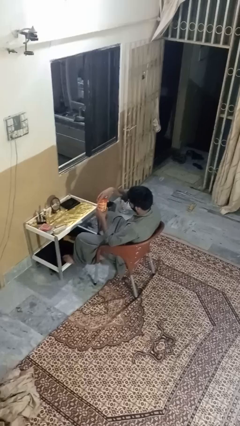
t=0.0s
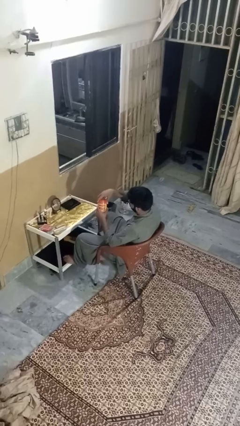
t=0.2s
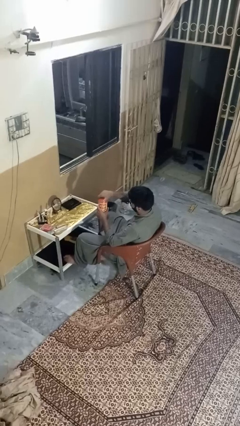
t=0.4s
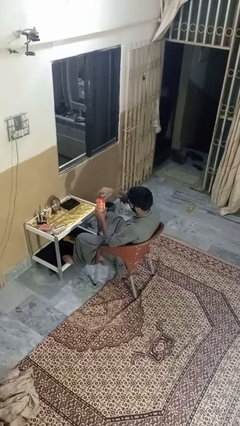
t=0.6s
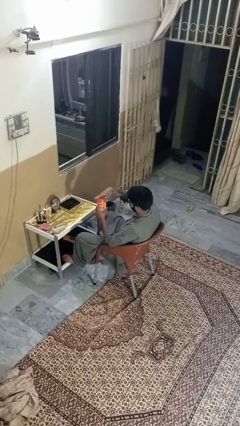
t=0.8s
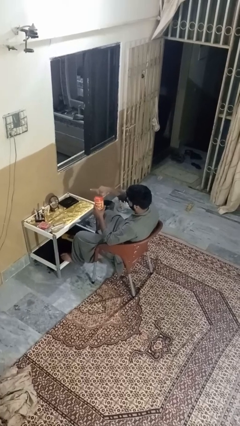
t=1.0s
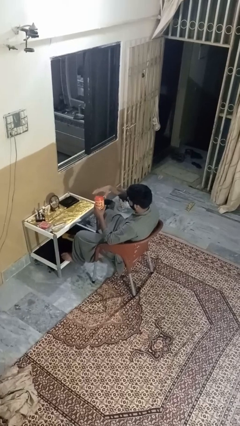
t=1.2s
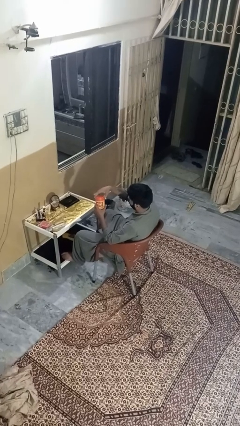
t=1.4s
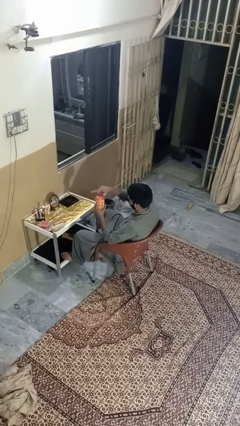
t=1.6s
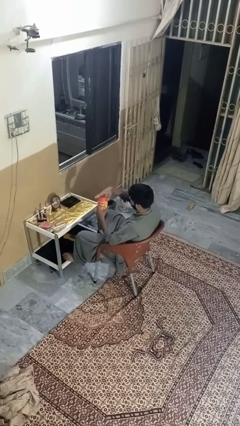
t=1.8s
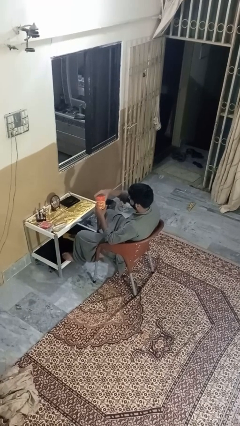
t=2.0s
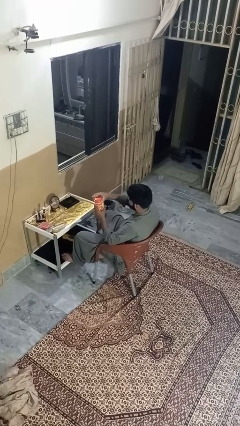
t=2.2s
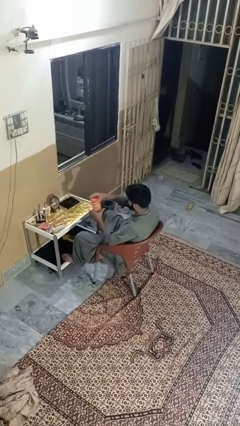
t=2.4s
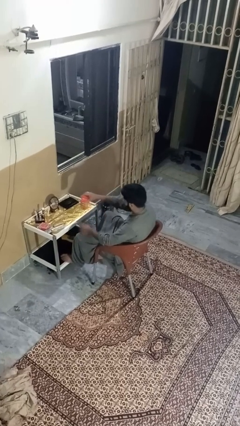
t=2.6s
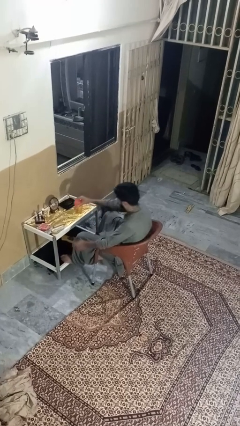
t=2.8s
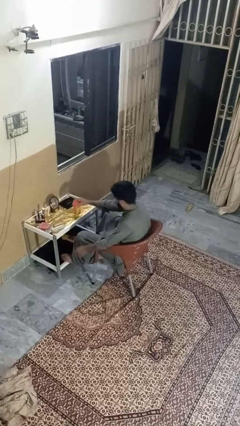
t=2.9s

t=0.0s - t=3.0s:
person closes jar

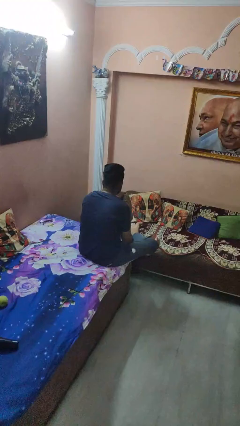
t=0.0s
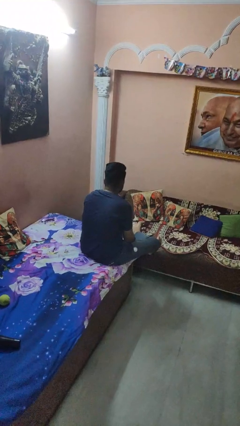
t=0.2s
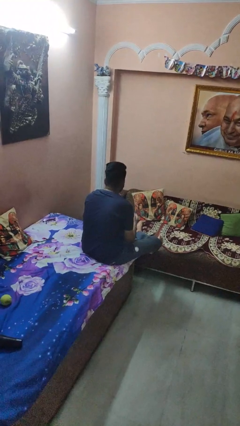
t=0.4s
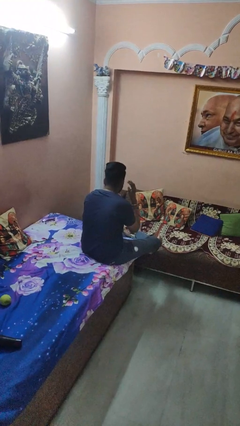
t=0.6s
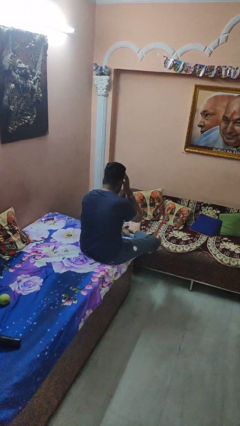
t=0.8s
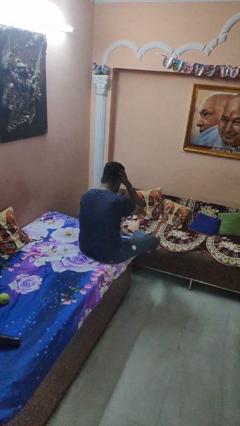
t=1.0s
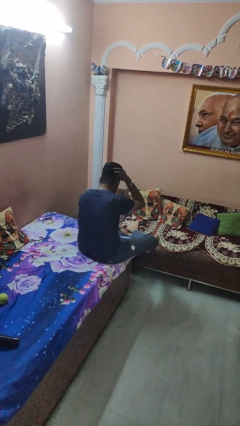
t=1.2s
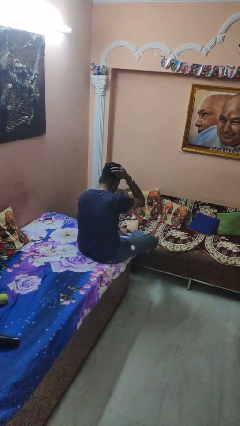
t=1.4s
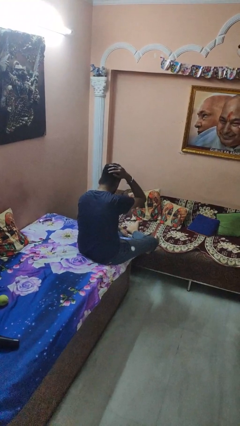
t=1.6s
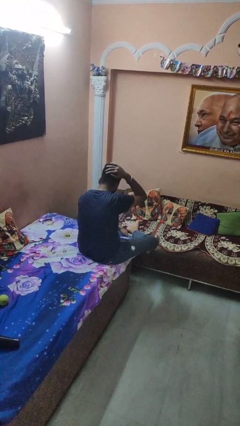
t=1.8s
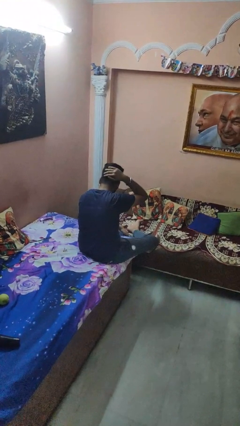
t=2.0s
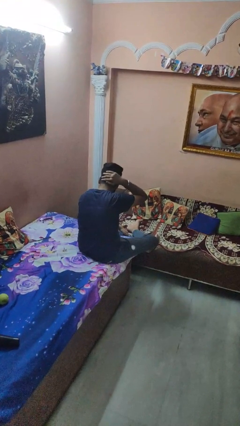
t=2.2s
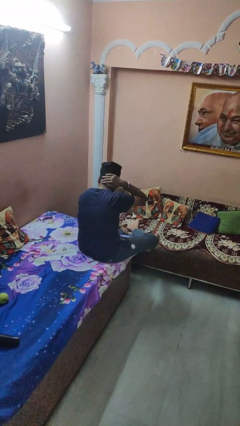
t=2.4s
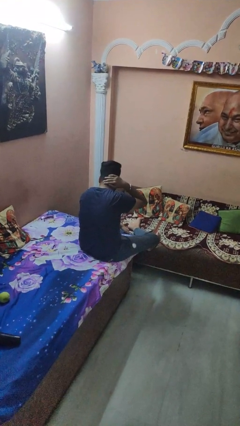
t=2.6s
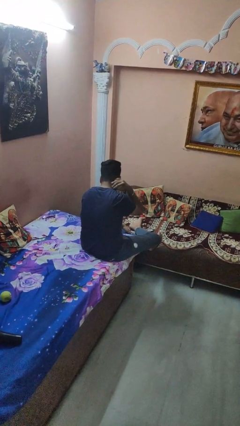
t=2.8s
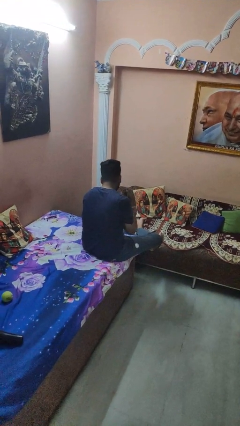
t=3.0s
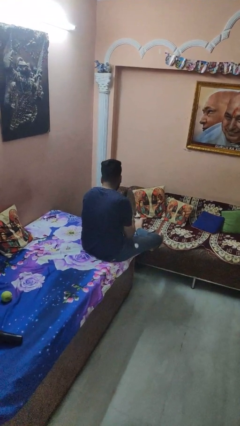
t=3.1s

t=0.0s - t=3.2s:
person strokes hair

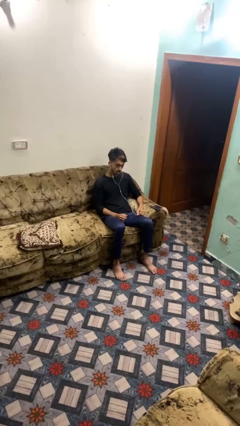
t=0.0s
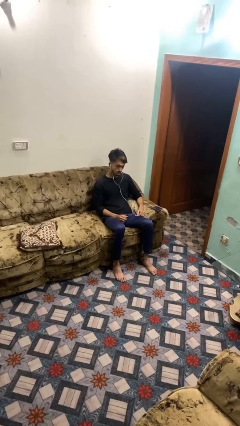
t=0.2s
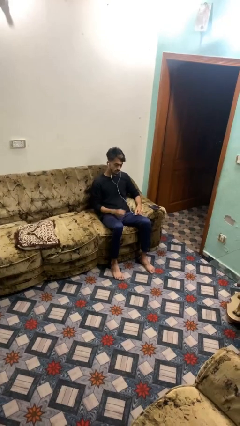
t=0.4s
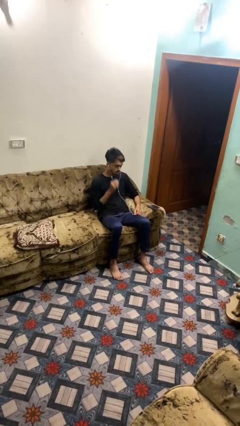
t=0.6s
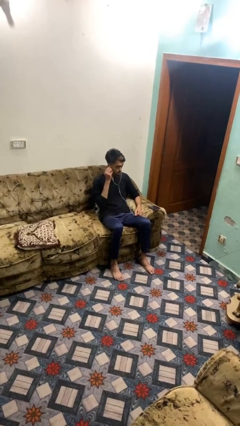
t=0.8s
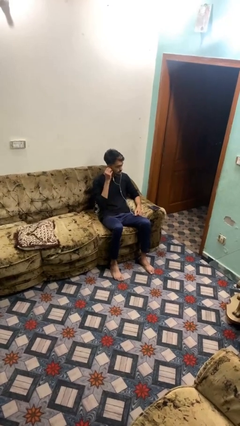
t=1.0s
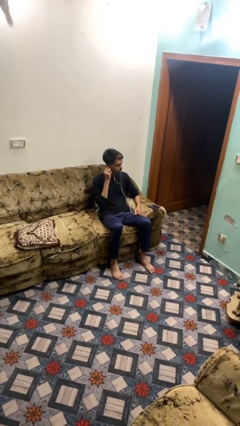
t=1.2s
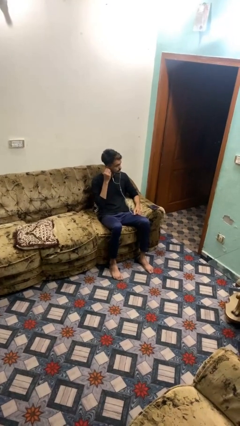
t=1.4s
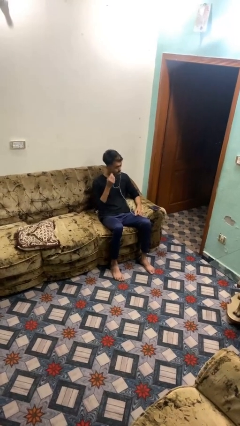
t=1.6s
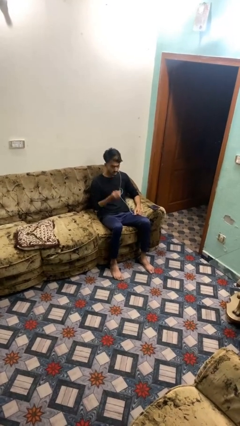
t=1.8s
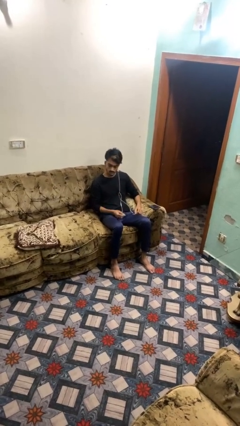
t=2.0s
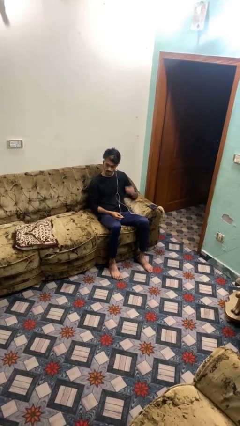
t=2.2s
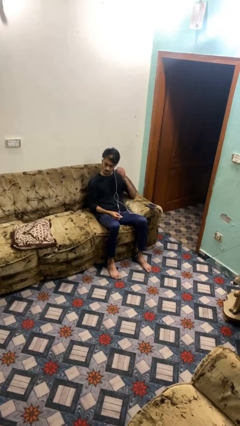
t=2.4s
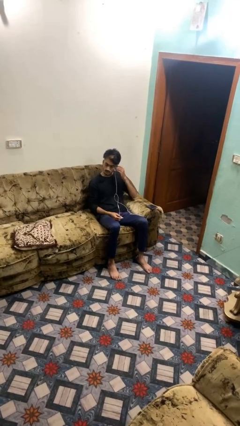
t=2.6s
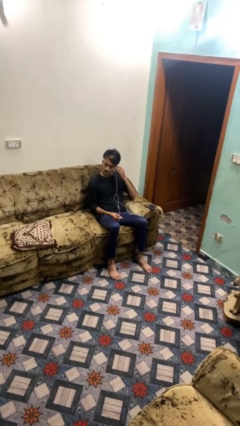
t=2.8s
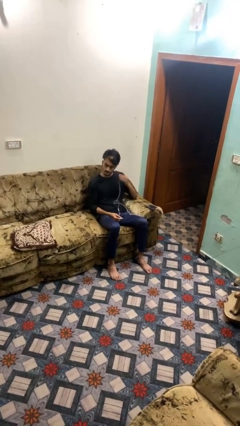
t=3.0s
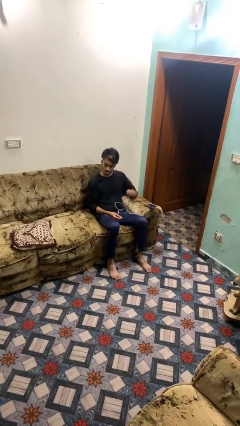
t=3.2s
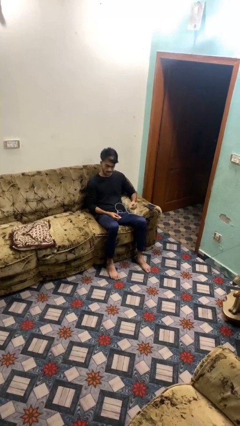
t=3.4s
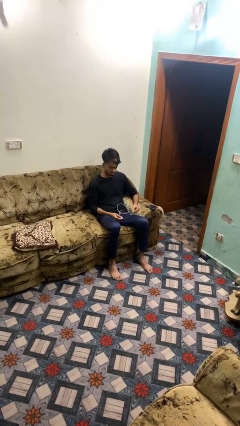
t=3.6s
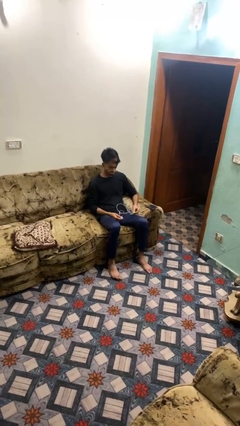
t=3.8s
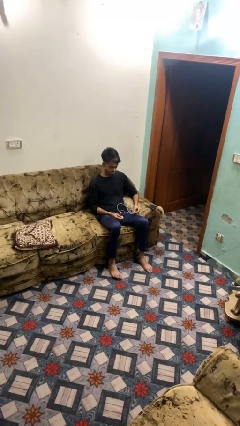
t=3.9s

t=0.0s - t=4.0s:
person takes off headphones

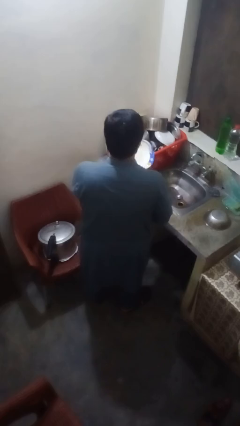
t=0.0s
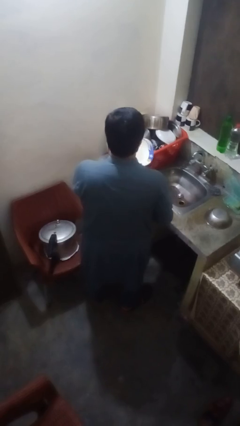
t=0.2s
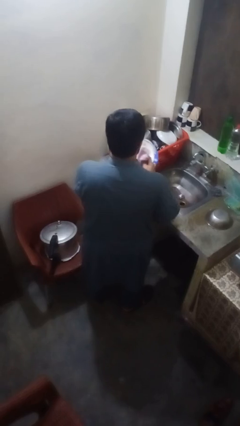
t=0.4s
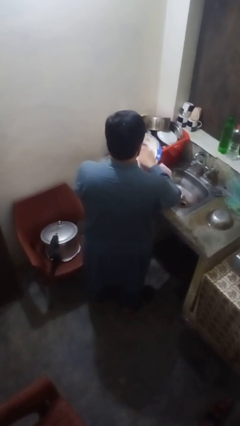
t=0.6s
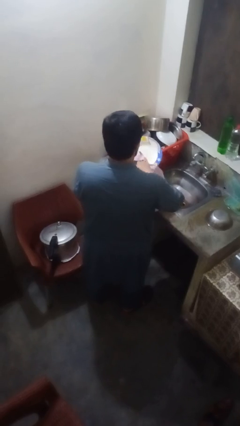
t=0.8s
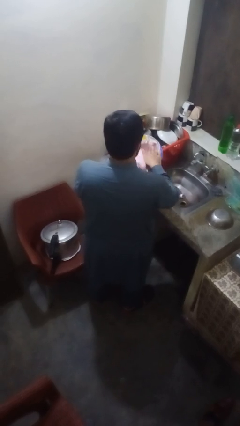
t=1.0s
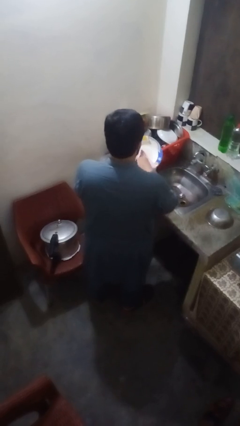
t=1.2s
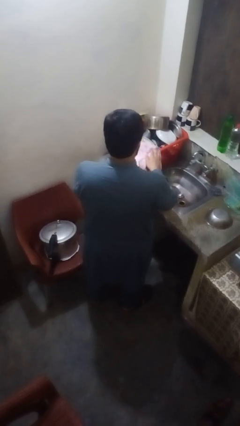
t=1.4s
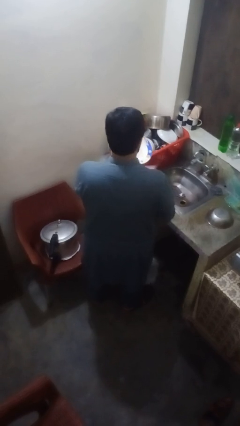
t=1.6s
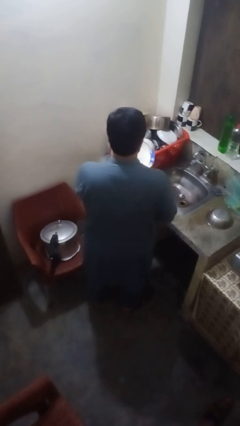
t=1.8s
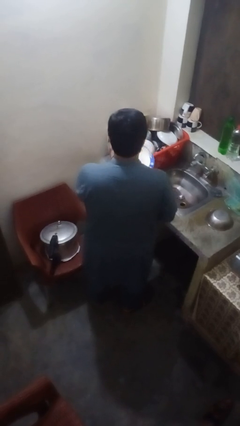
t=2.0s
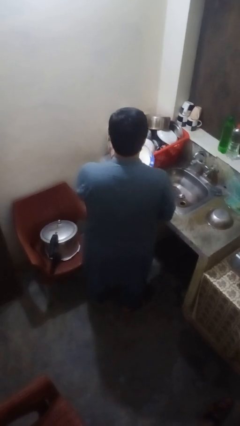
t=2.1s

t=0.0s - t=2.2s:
person dries dish

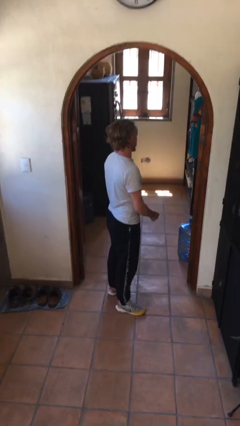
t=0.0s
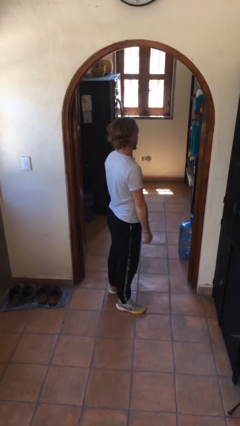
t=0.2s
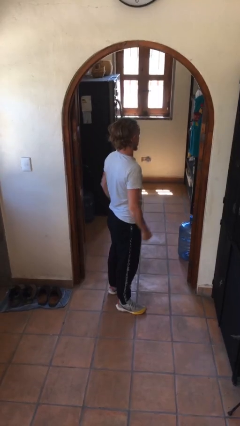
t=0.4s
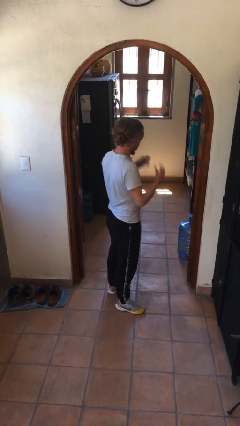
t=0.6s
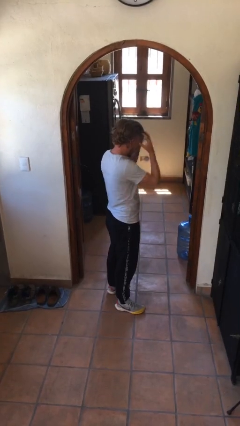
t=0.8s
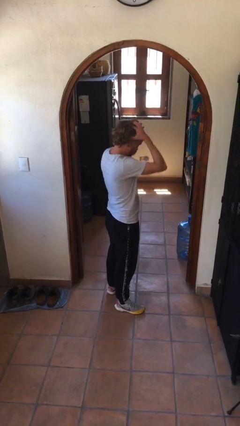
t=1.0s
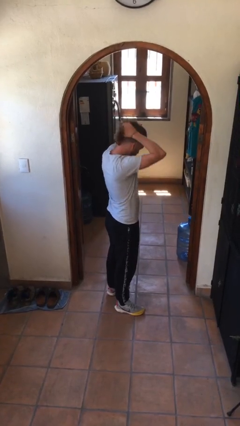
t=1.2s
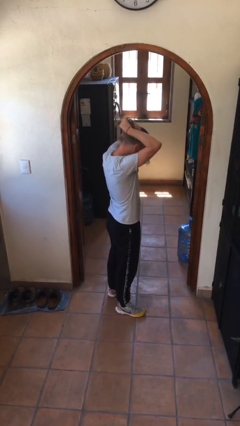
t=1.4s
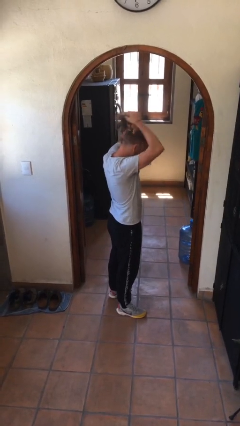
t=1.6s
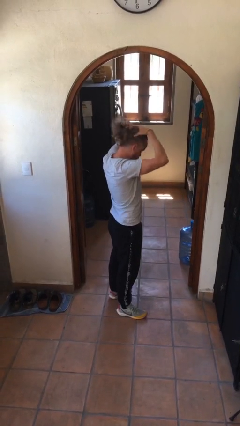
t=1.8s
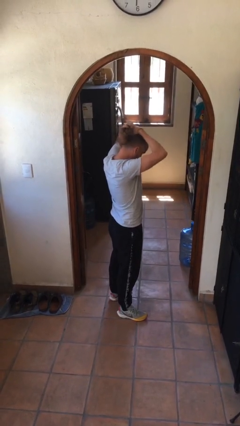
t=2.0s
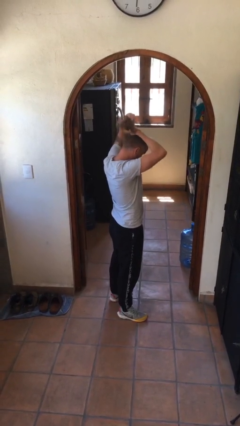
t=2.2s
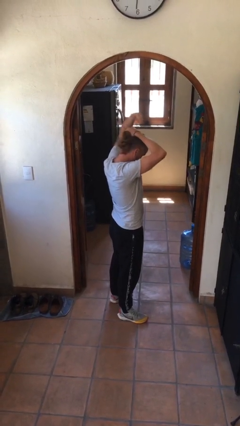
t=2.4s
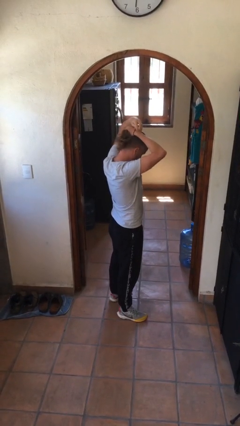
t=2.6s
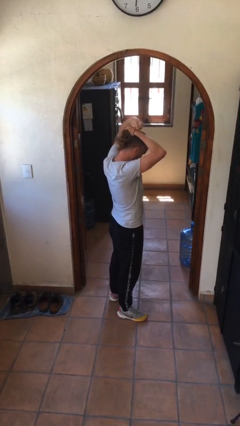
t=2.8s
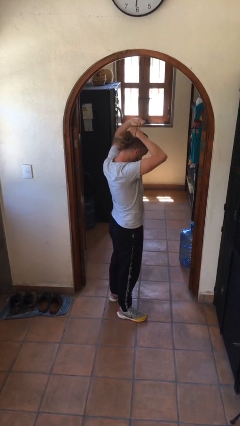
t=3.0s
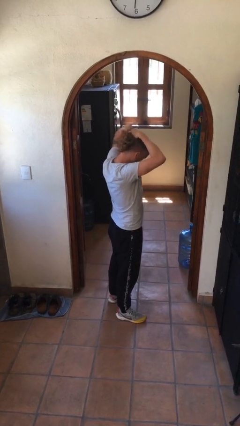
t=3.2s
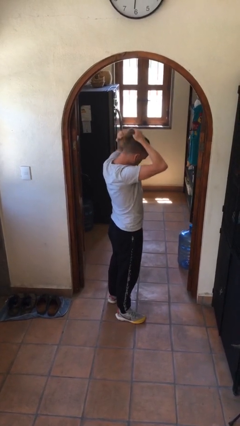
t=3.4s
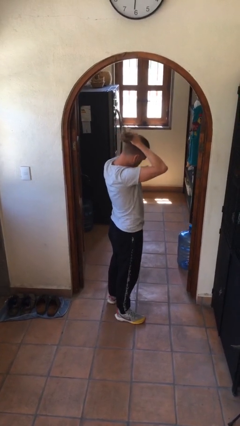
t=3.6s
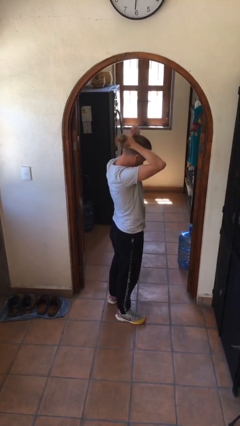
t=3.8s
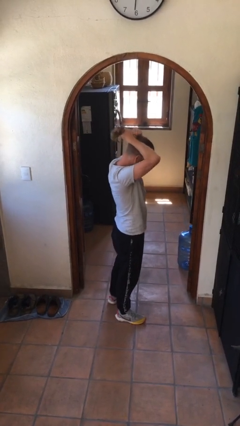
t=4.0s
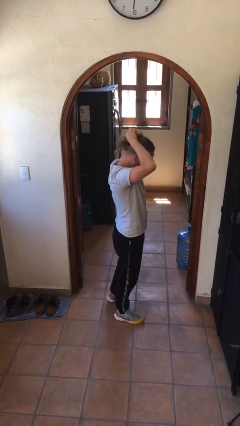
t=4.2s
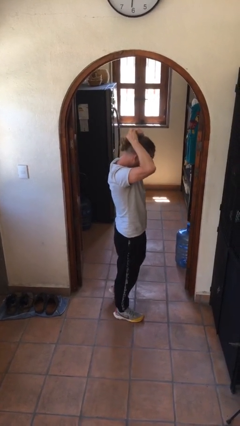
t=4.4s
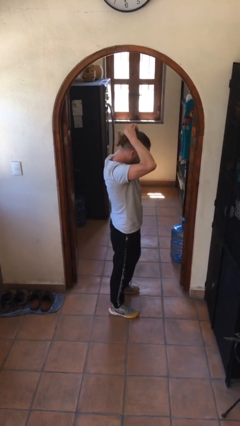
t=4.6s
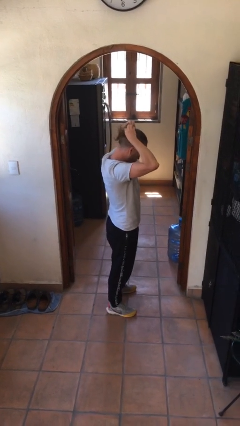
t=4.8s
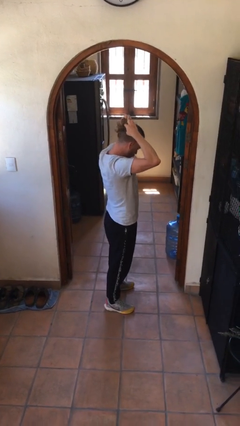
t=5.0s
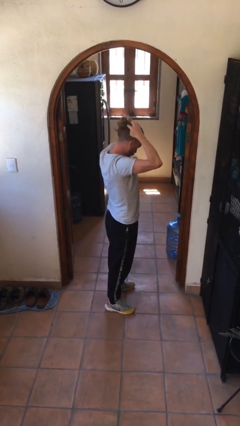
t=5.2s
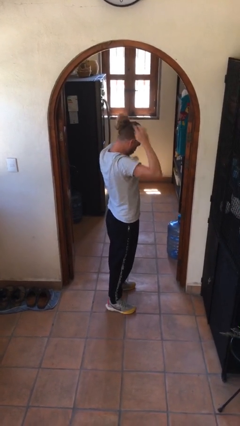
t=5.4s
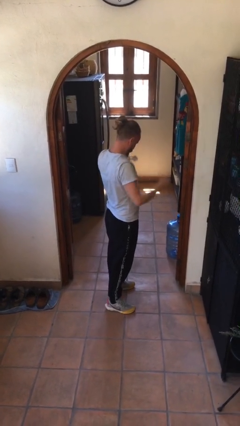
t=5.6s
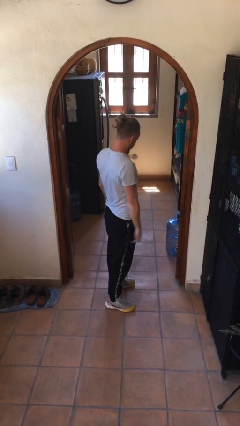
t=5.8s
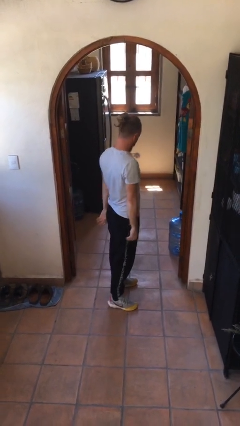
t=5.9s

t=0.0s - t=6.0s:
person puts hair in ponytail
